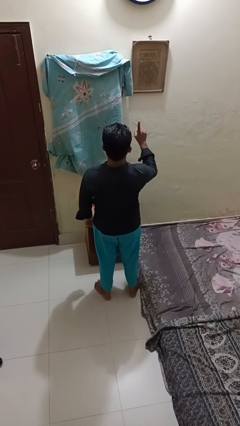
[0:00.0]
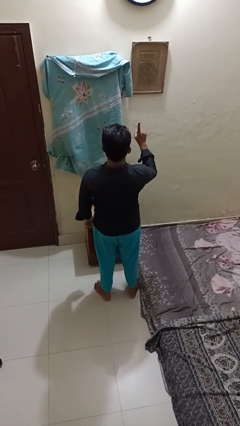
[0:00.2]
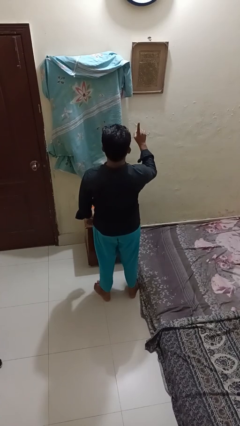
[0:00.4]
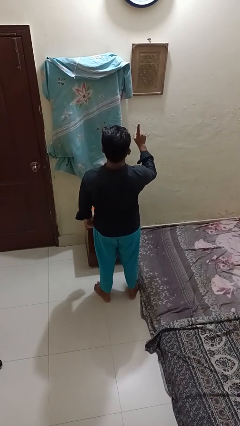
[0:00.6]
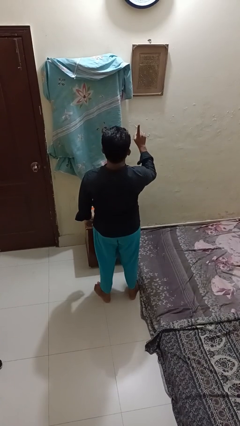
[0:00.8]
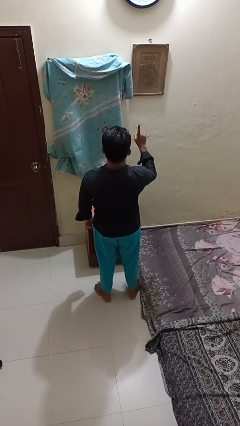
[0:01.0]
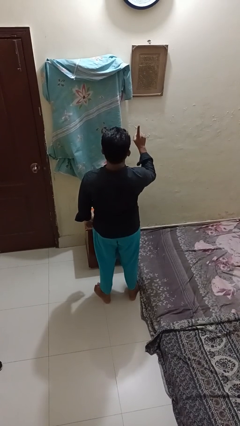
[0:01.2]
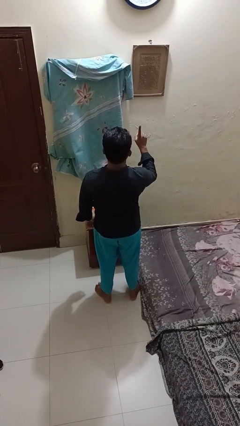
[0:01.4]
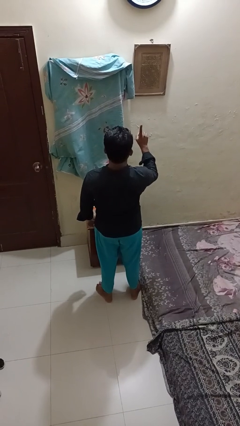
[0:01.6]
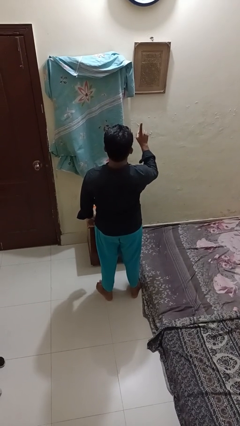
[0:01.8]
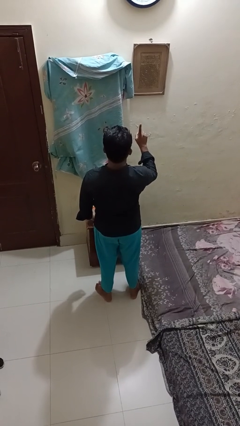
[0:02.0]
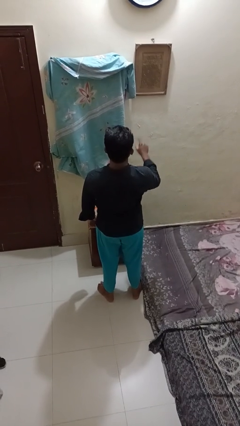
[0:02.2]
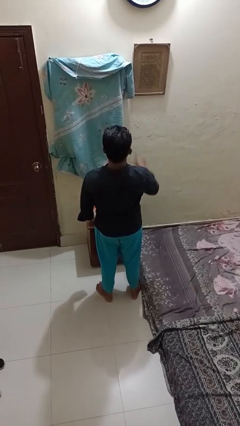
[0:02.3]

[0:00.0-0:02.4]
person gestures number one

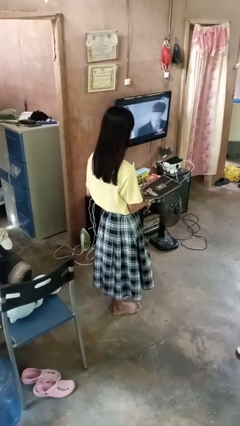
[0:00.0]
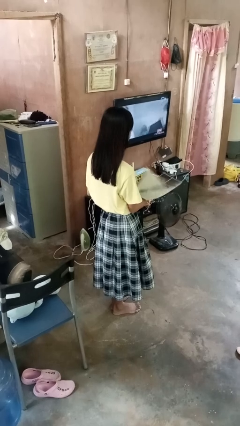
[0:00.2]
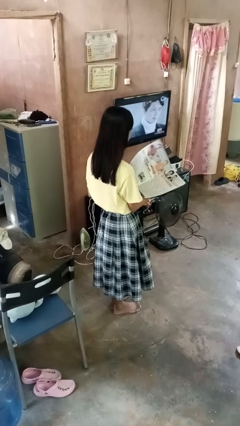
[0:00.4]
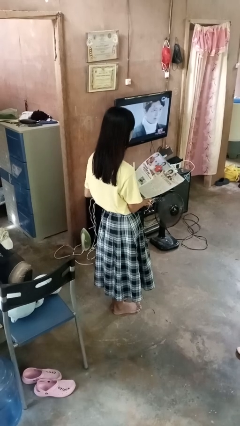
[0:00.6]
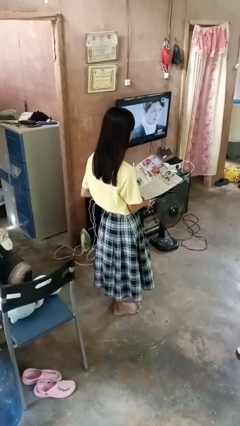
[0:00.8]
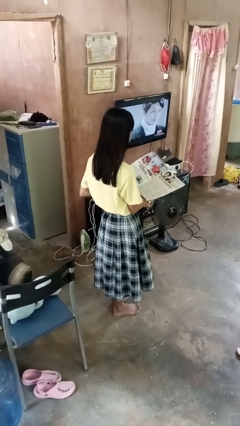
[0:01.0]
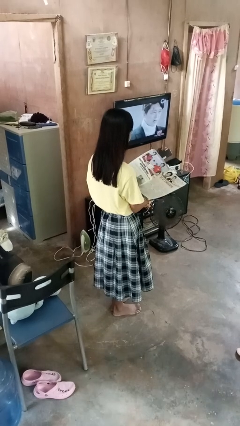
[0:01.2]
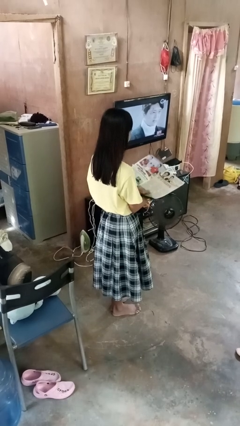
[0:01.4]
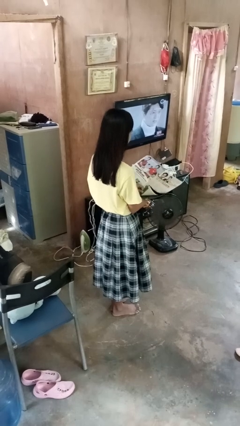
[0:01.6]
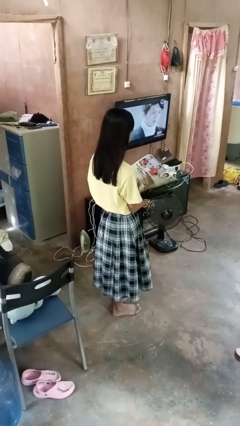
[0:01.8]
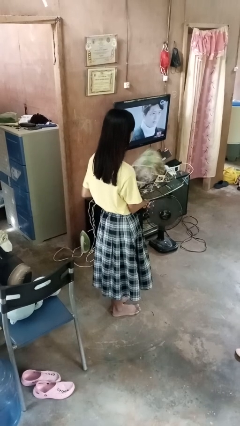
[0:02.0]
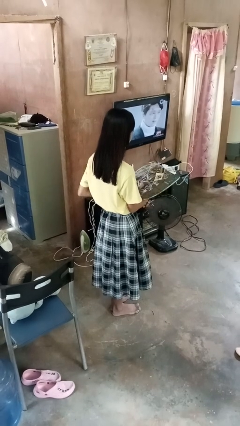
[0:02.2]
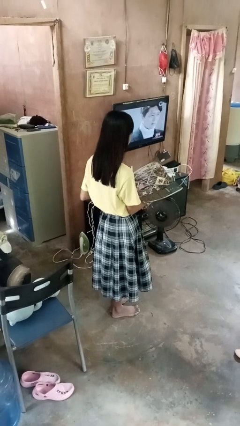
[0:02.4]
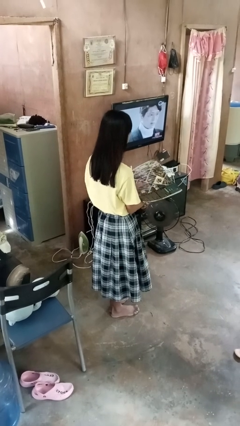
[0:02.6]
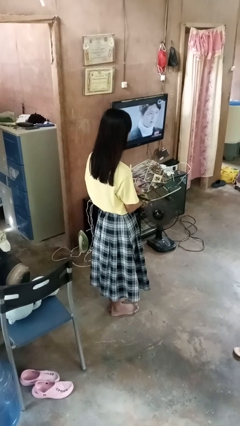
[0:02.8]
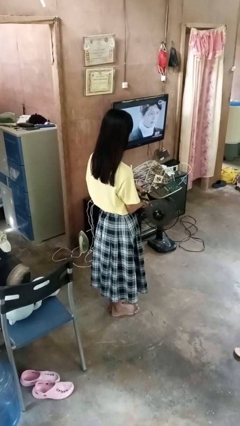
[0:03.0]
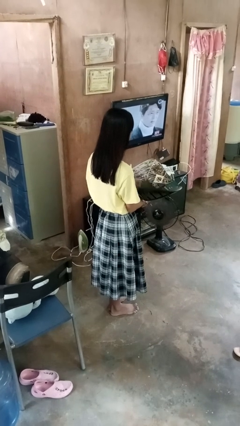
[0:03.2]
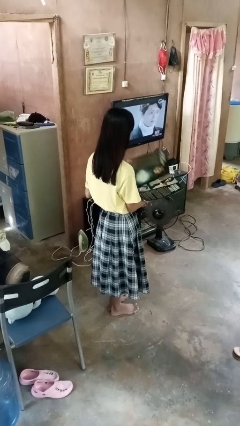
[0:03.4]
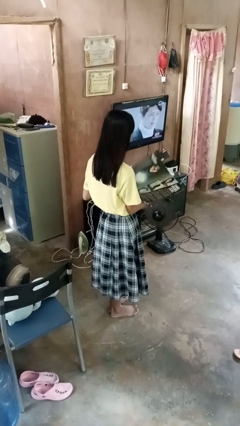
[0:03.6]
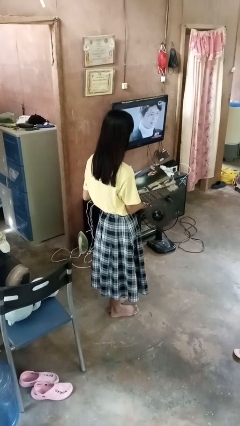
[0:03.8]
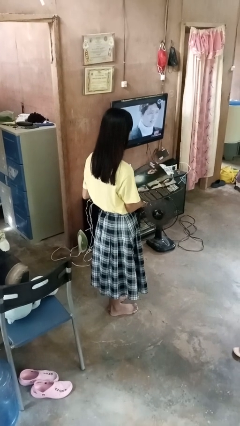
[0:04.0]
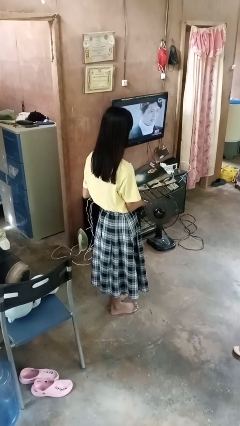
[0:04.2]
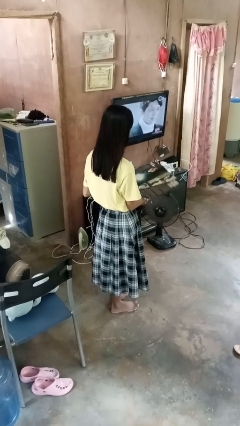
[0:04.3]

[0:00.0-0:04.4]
person reads magazine

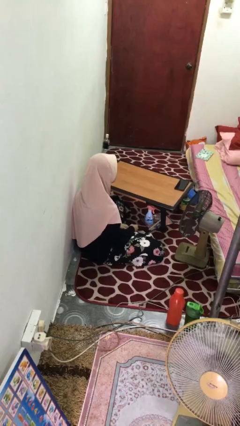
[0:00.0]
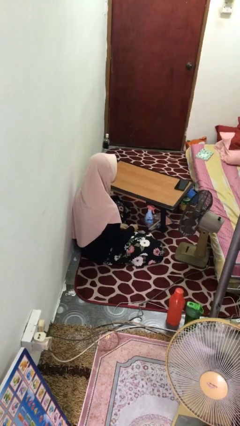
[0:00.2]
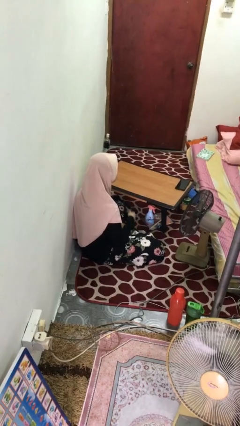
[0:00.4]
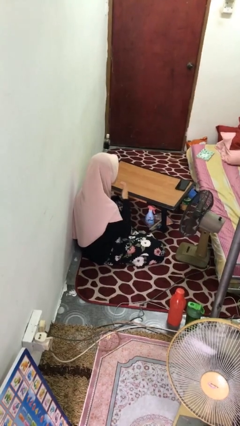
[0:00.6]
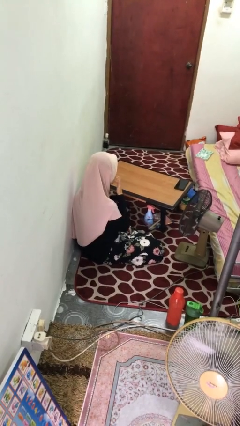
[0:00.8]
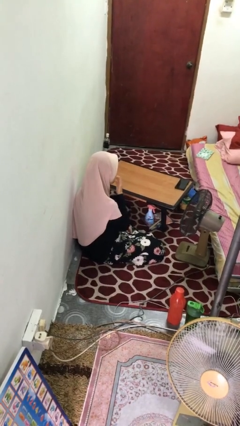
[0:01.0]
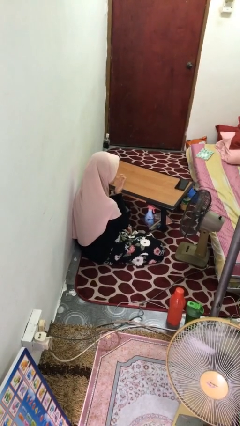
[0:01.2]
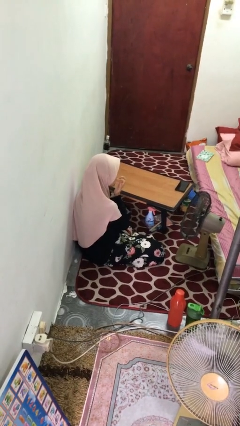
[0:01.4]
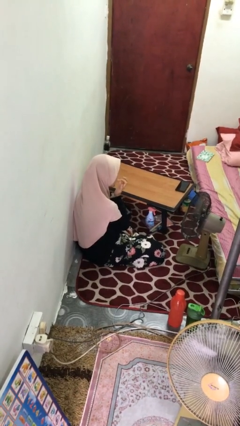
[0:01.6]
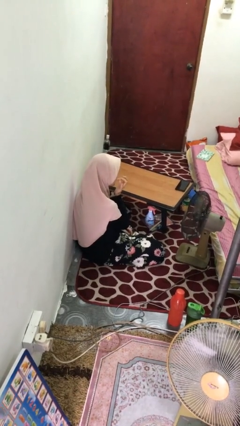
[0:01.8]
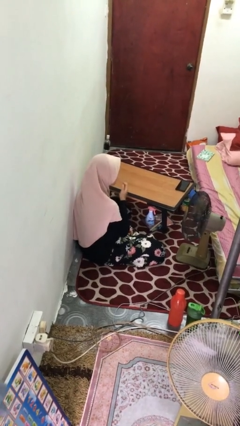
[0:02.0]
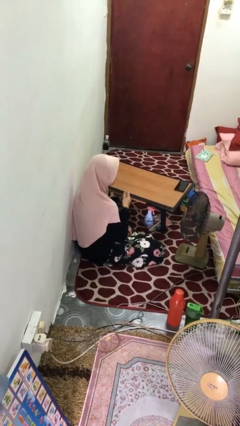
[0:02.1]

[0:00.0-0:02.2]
person licks fingers

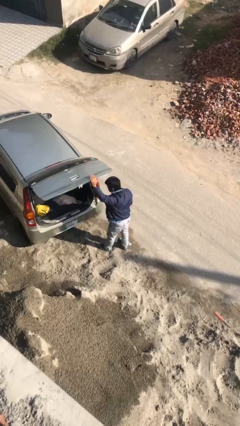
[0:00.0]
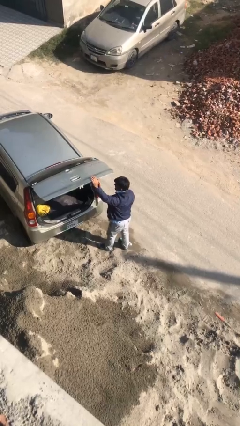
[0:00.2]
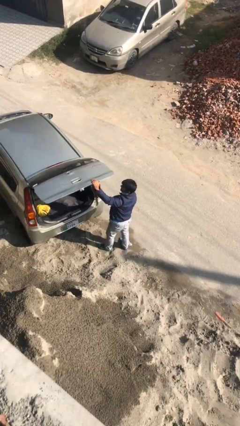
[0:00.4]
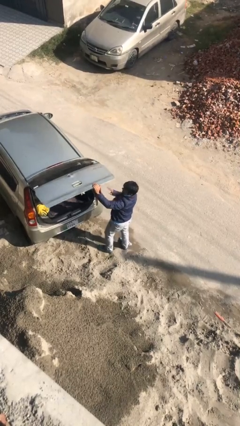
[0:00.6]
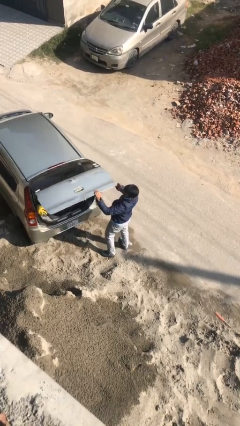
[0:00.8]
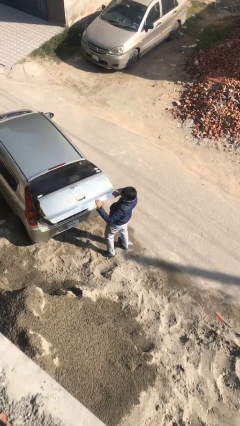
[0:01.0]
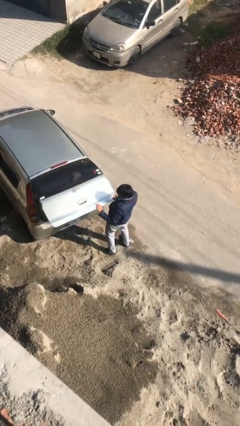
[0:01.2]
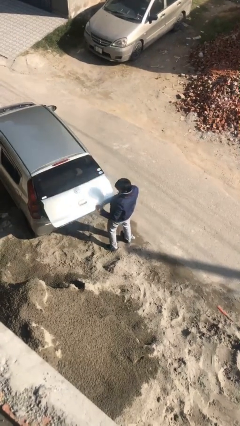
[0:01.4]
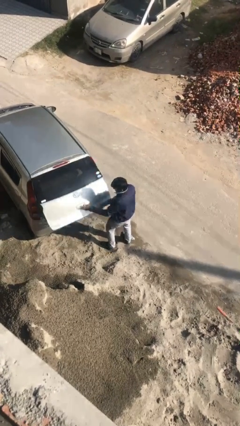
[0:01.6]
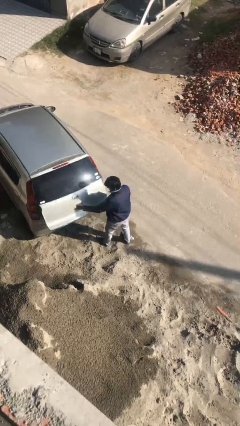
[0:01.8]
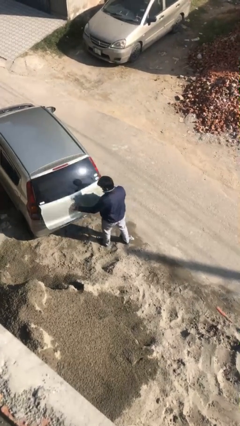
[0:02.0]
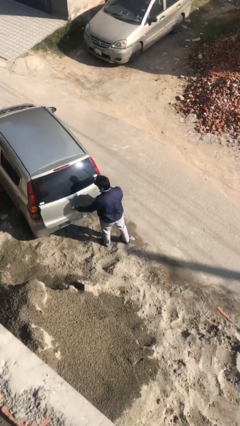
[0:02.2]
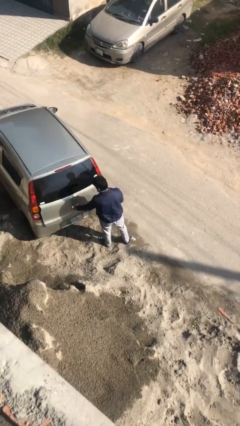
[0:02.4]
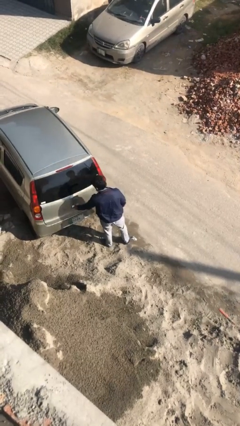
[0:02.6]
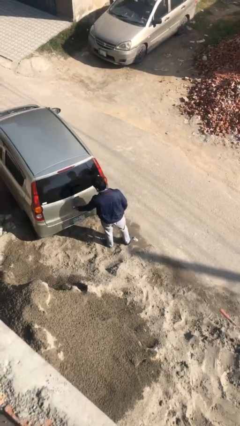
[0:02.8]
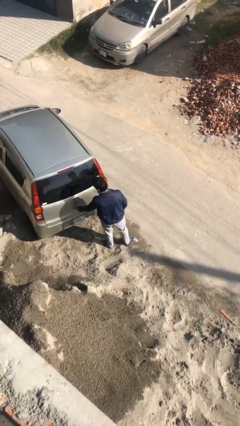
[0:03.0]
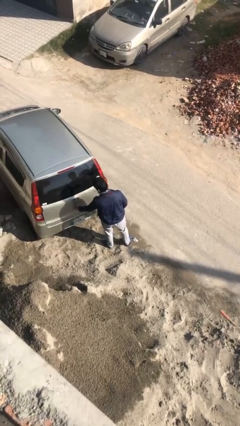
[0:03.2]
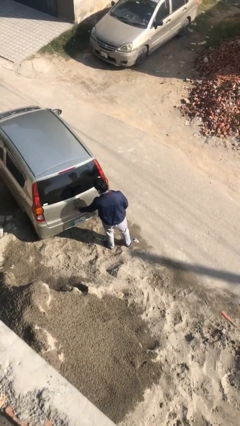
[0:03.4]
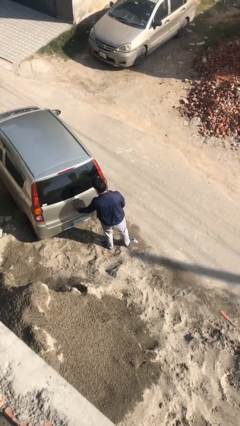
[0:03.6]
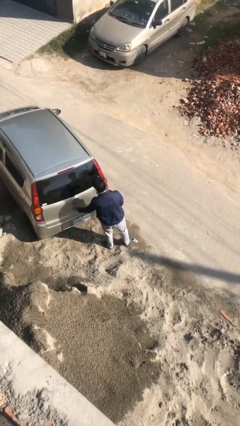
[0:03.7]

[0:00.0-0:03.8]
person closes car trunk

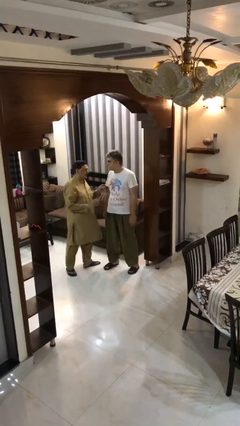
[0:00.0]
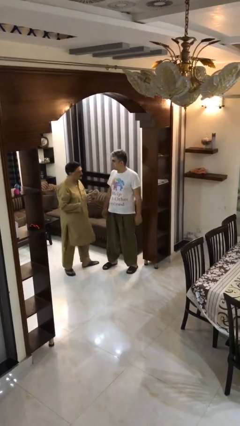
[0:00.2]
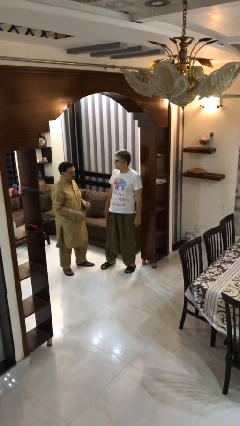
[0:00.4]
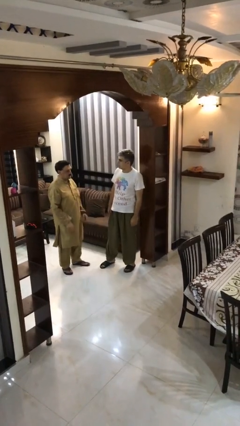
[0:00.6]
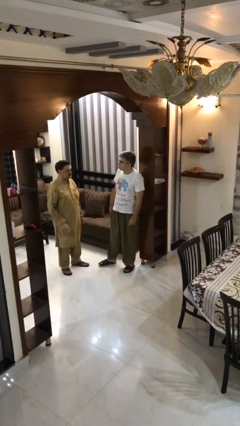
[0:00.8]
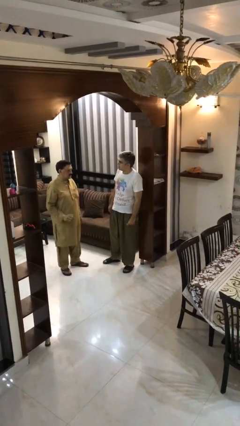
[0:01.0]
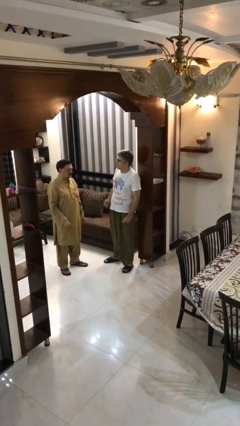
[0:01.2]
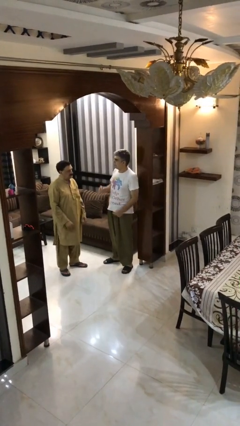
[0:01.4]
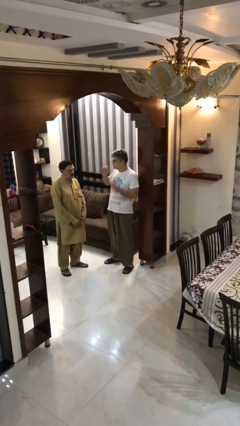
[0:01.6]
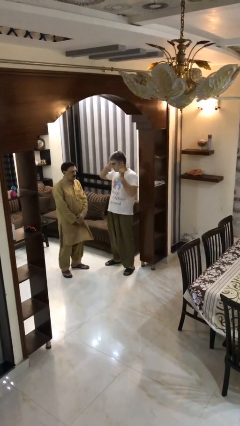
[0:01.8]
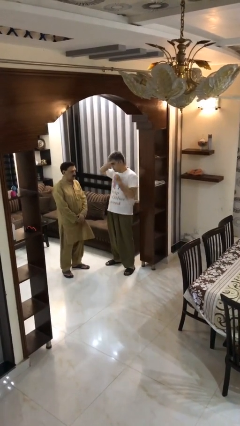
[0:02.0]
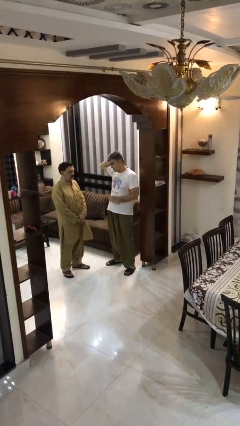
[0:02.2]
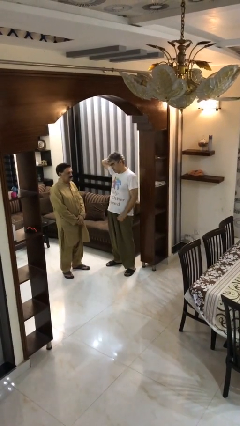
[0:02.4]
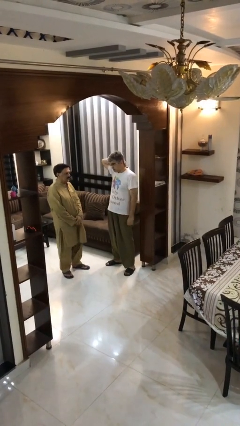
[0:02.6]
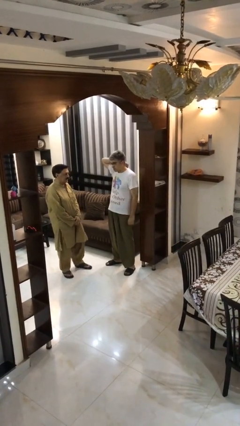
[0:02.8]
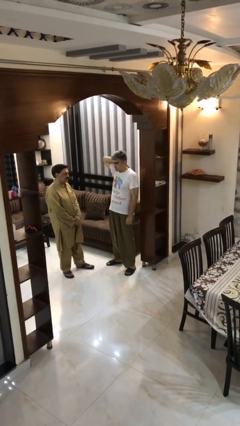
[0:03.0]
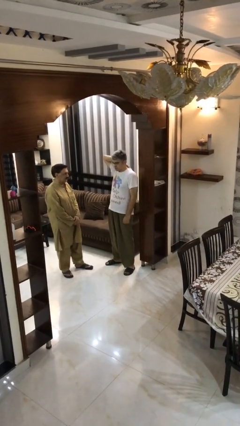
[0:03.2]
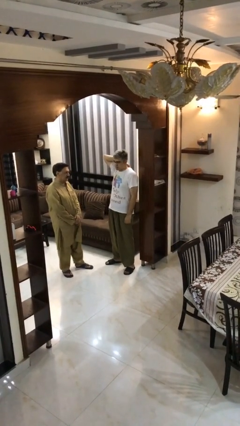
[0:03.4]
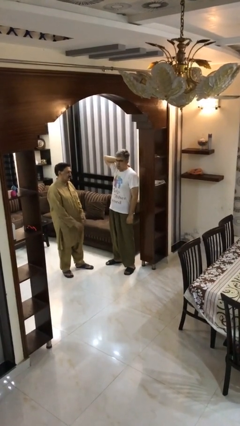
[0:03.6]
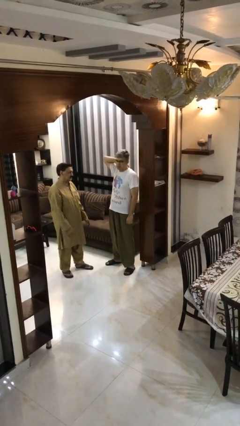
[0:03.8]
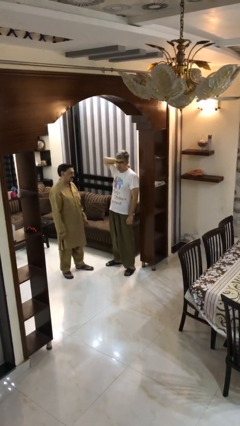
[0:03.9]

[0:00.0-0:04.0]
person talks to person

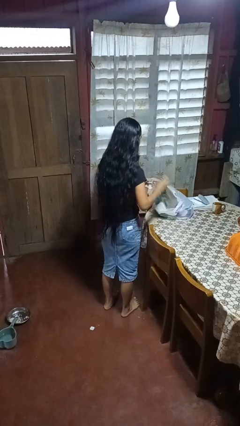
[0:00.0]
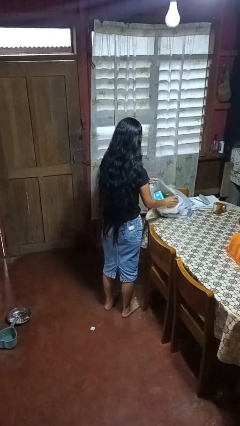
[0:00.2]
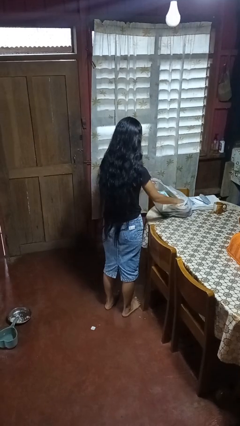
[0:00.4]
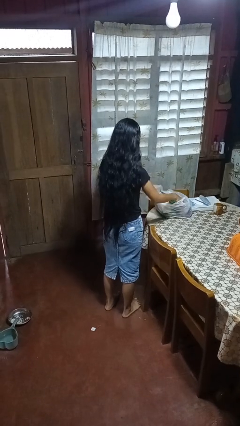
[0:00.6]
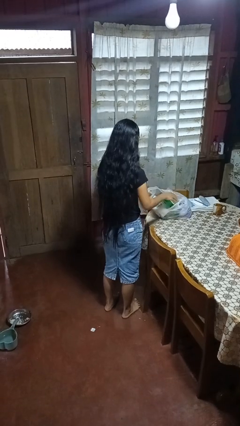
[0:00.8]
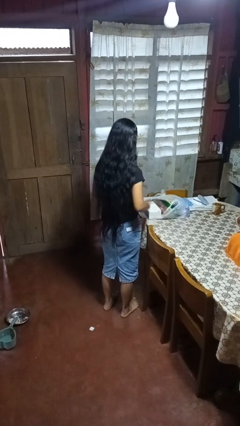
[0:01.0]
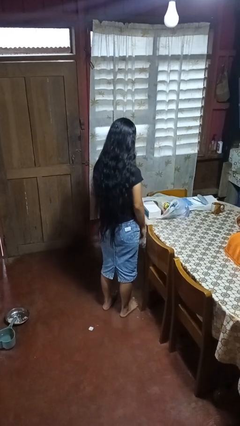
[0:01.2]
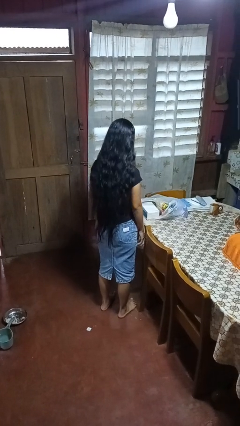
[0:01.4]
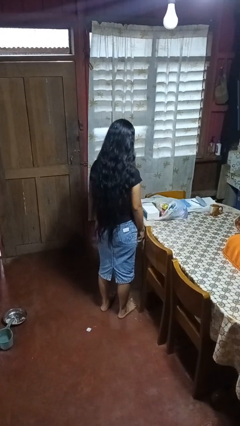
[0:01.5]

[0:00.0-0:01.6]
person puts object into bag
